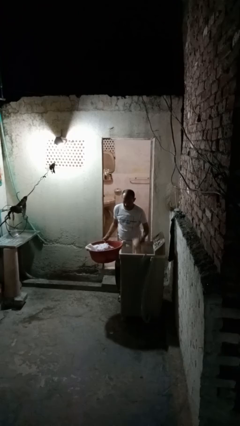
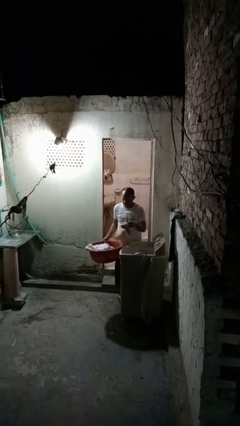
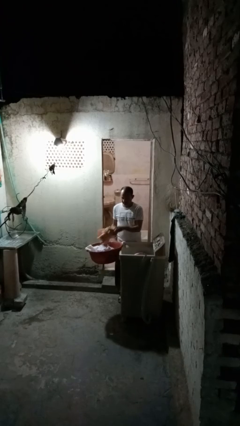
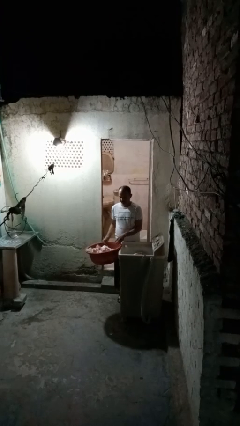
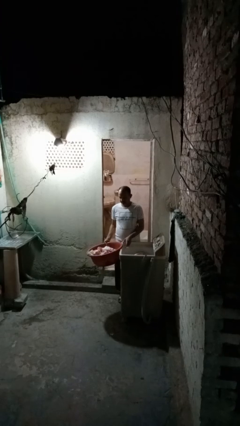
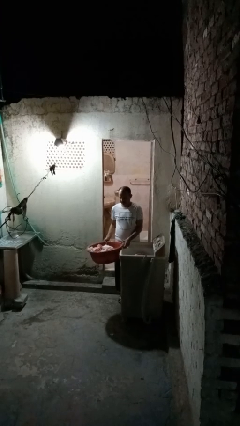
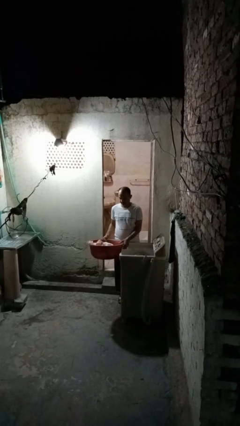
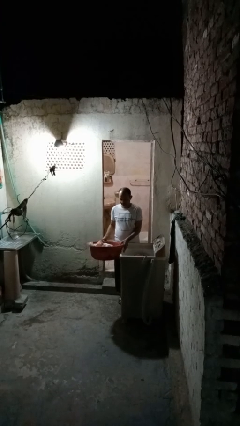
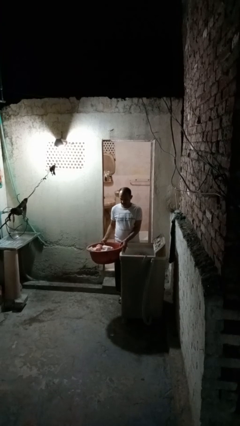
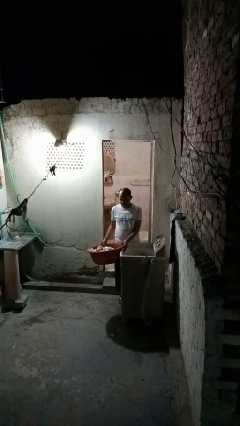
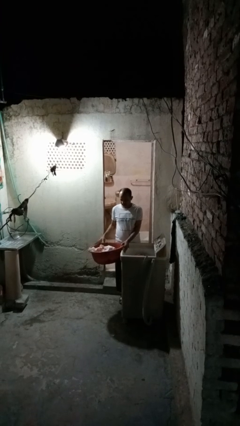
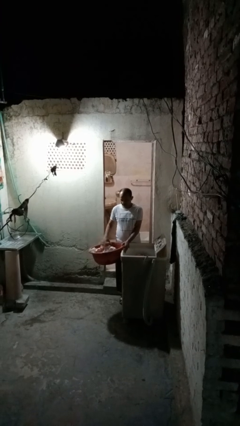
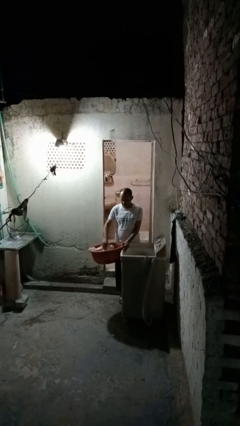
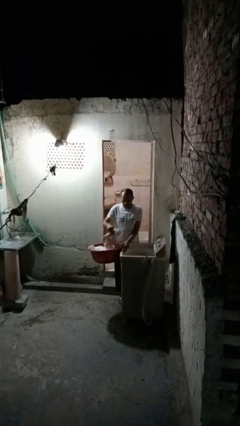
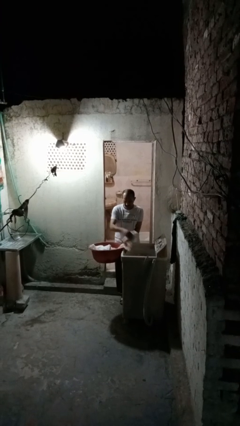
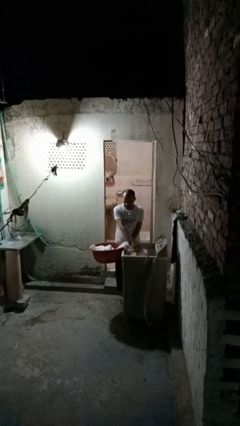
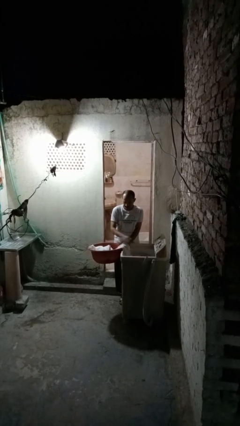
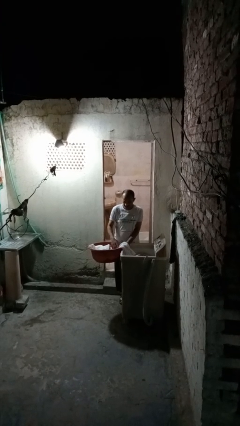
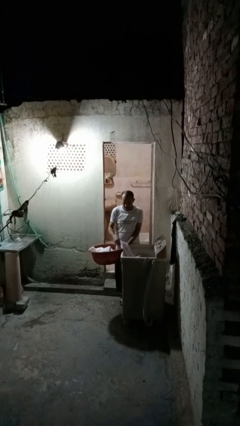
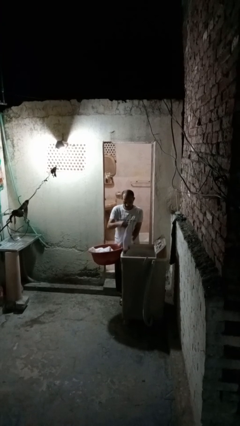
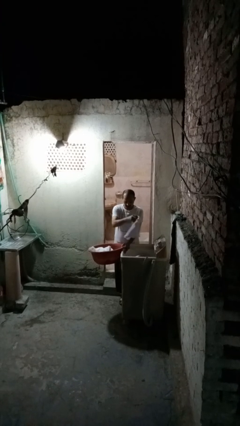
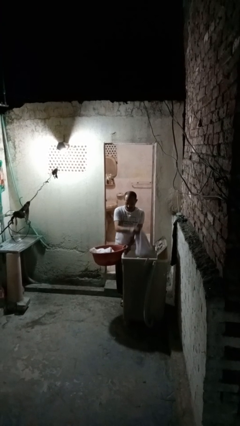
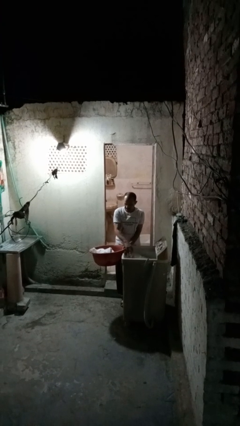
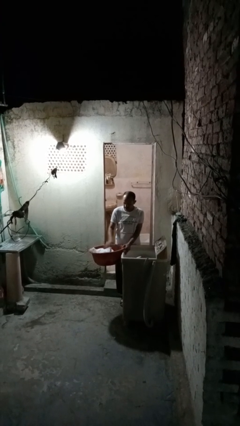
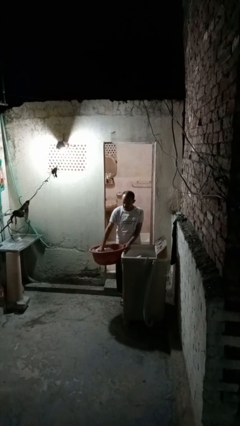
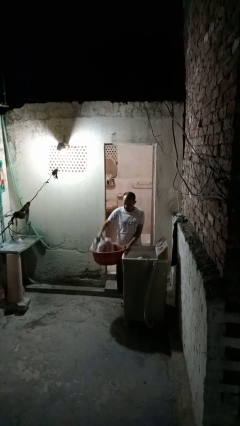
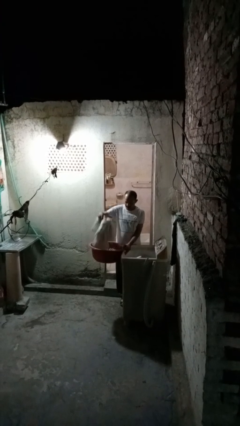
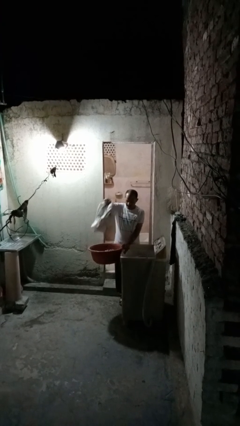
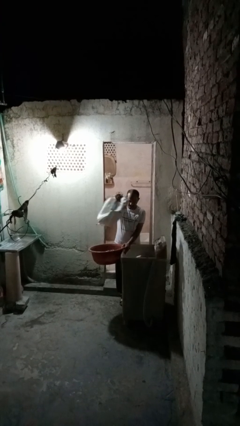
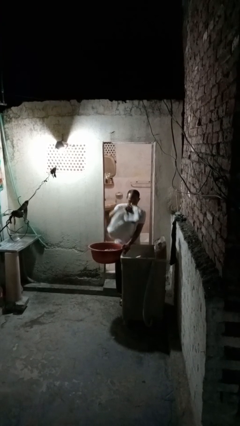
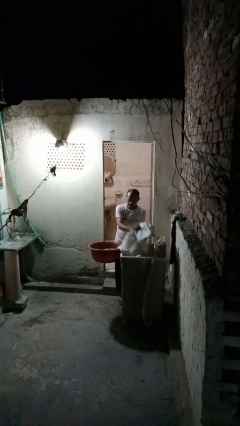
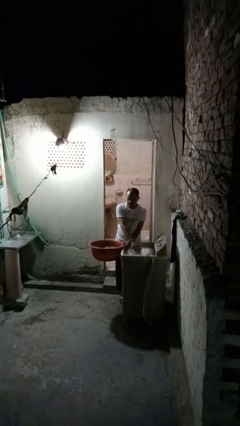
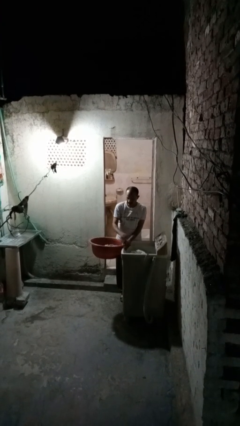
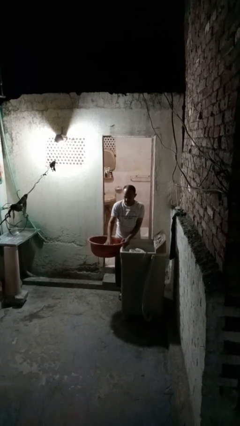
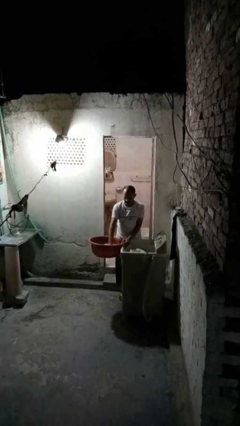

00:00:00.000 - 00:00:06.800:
person loads clotheswasher

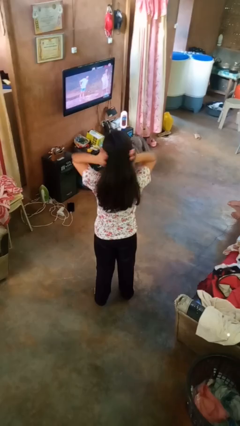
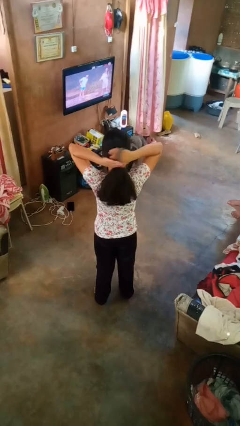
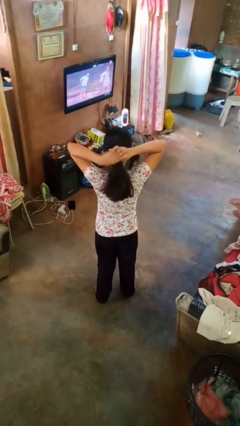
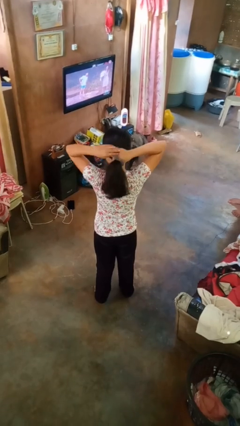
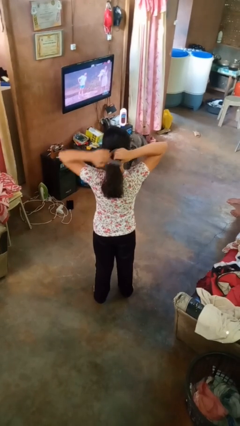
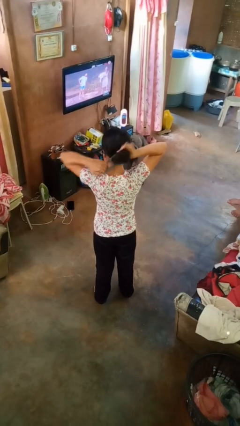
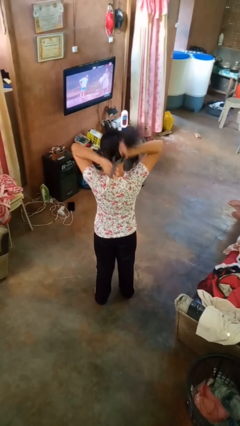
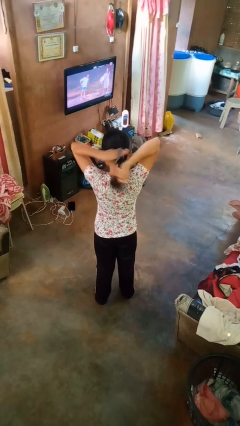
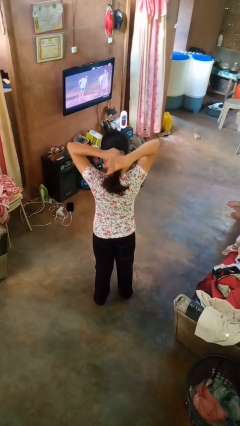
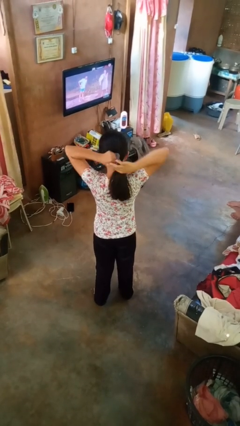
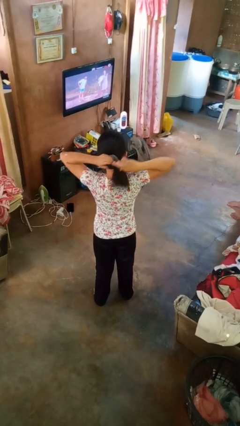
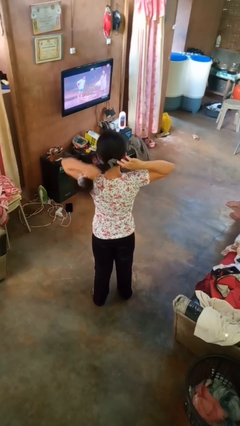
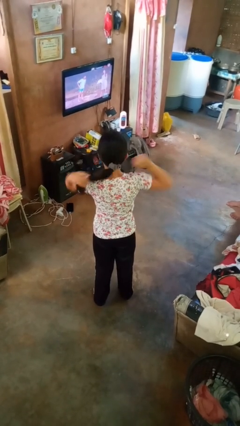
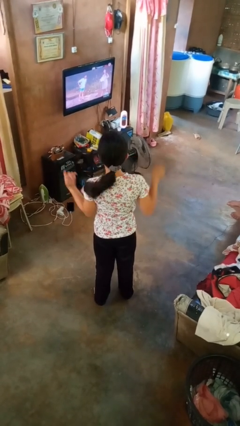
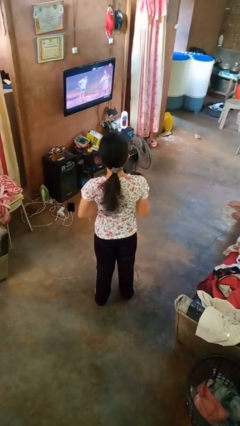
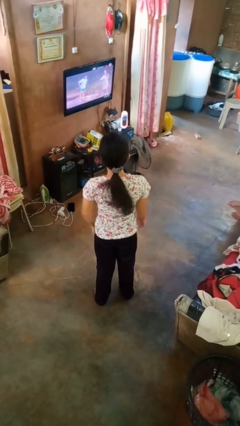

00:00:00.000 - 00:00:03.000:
person puts hair in ponytail

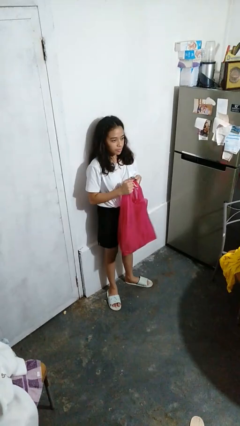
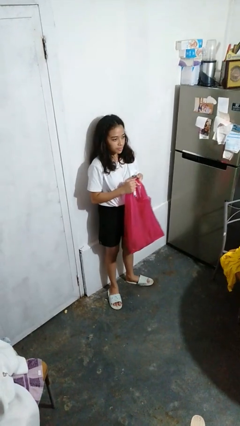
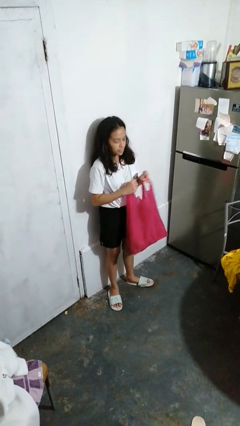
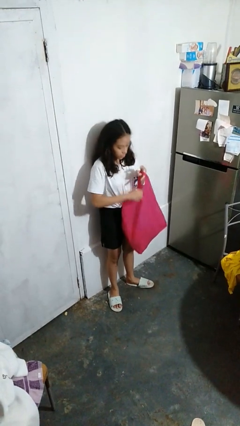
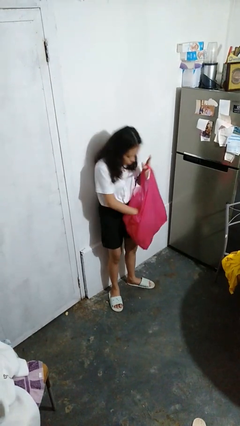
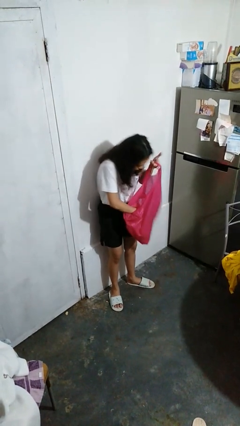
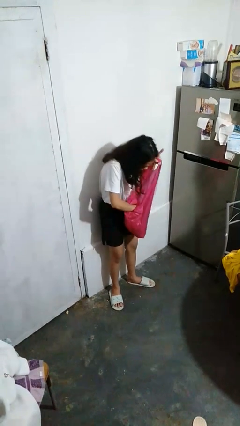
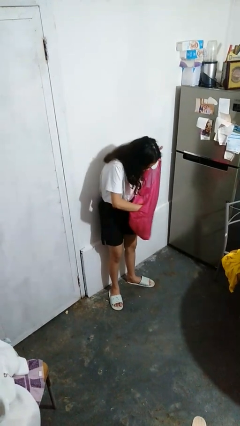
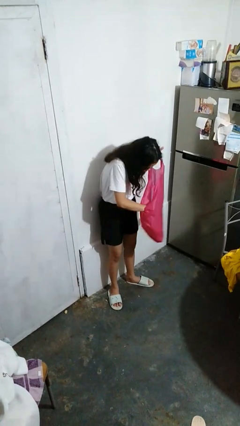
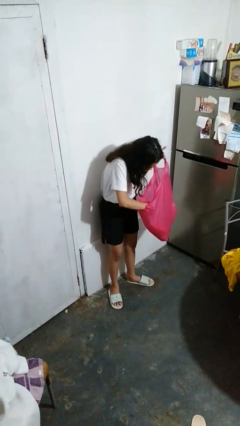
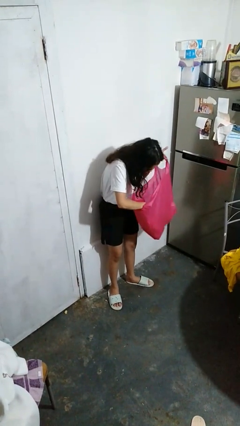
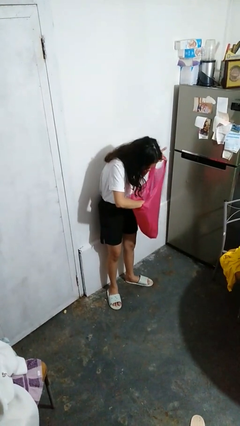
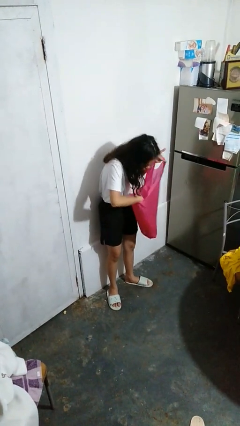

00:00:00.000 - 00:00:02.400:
person searches in bag

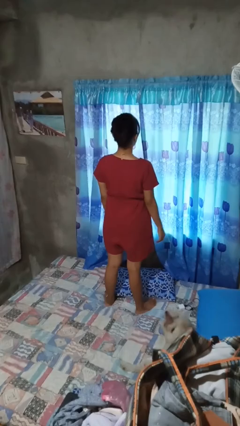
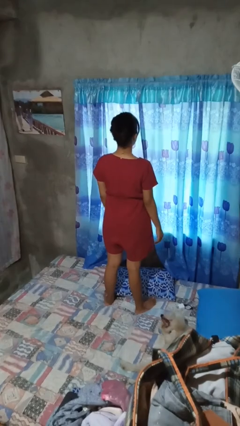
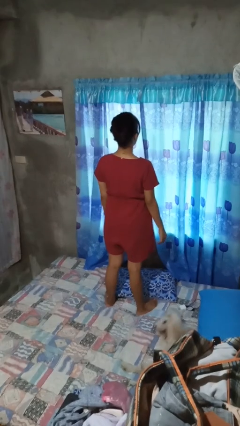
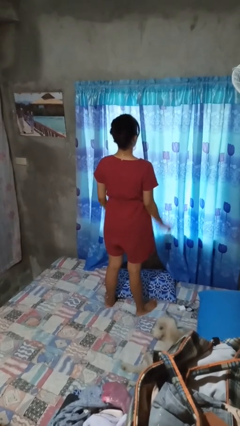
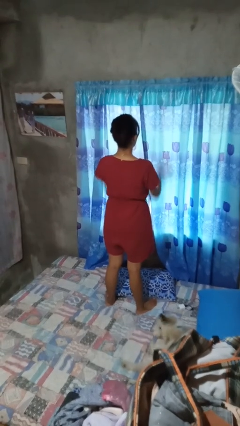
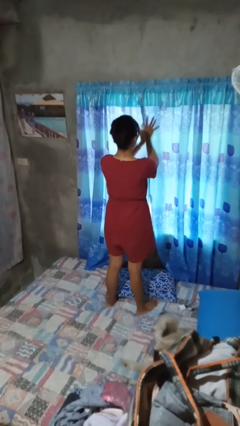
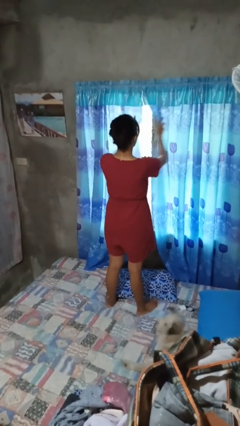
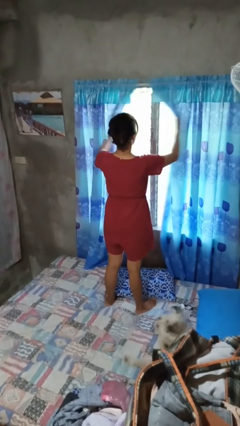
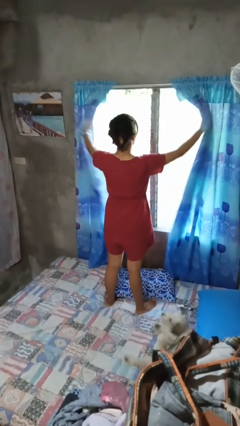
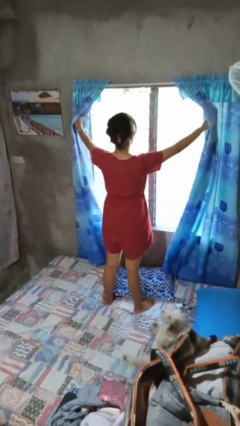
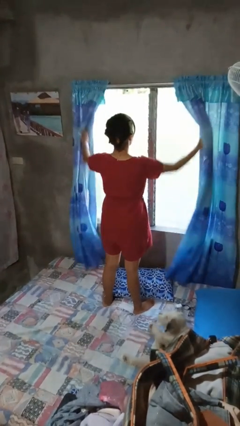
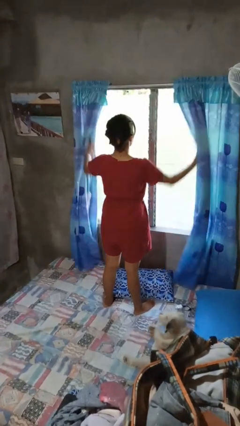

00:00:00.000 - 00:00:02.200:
person opens curtains

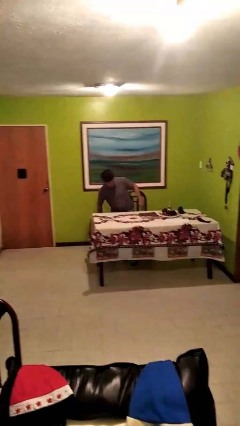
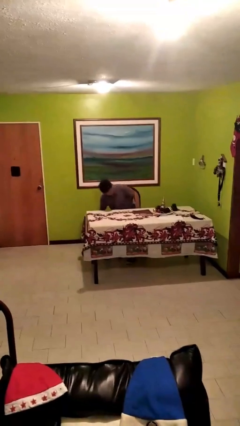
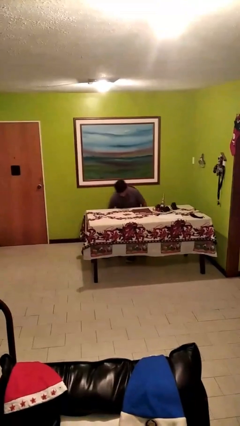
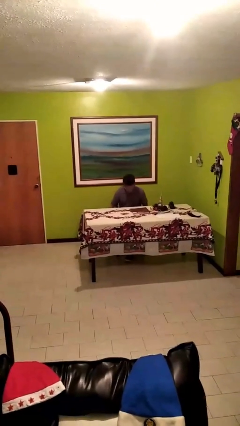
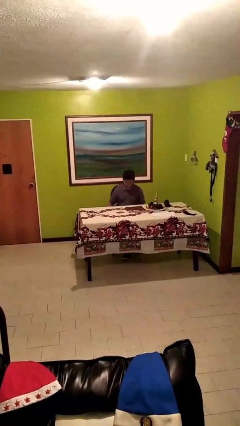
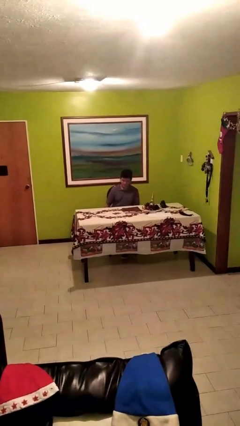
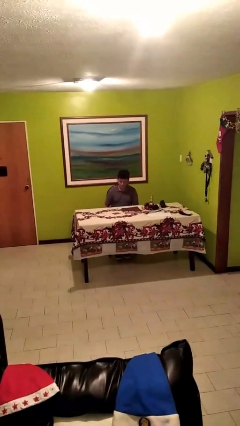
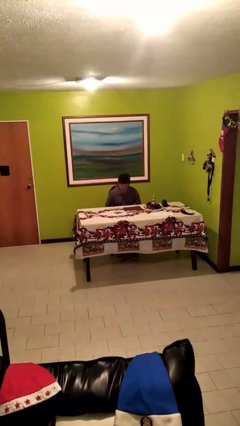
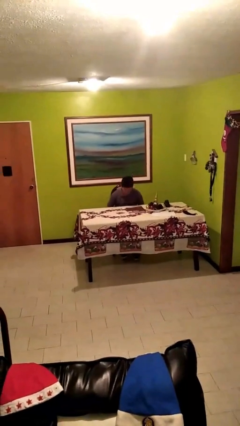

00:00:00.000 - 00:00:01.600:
person sits down

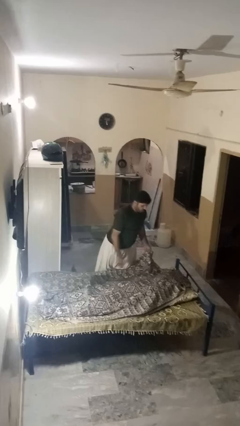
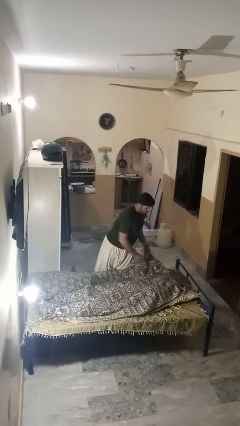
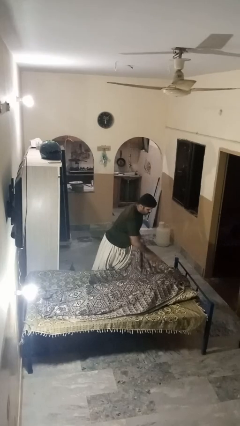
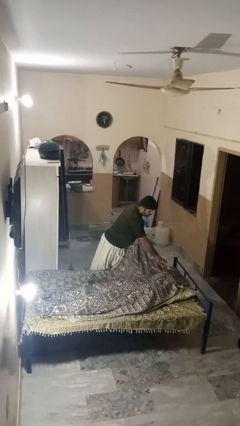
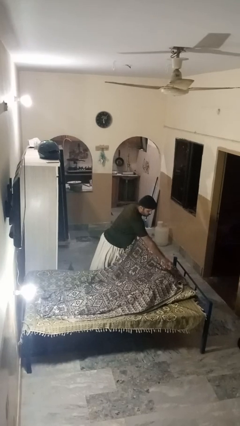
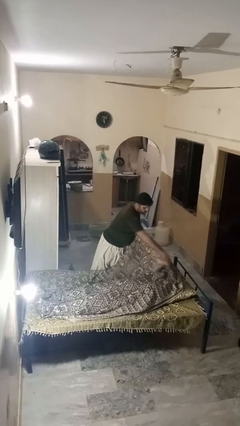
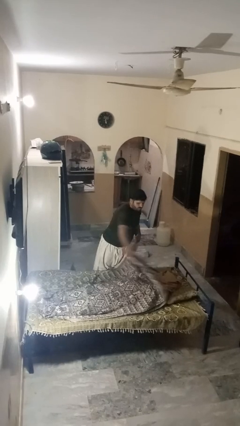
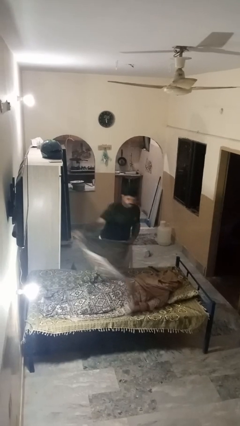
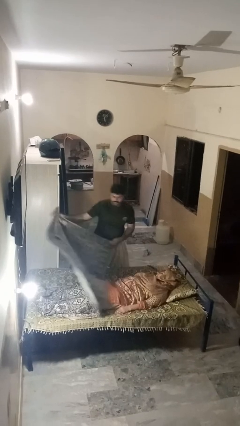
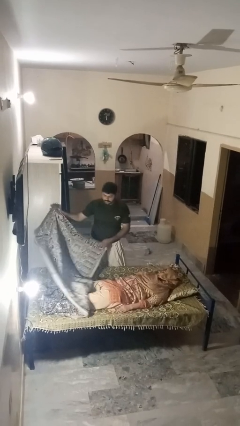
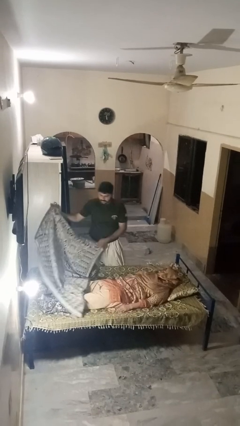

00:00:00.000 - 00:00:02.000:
person uncovers friend with blanket
